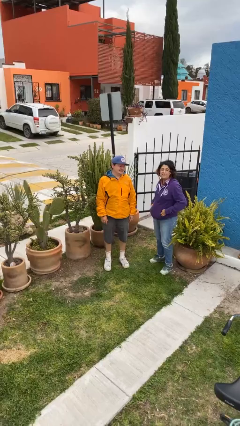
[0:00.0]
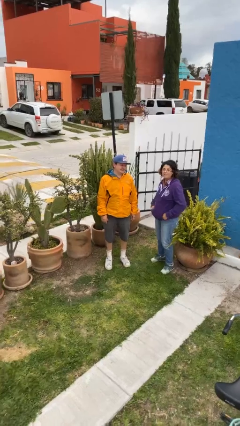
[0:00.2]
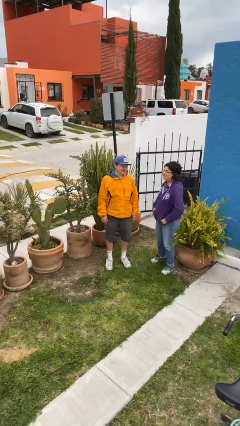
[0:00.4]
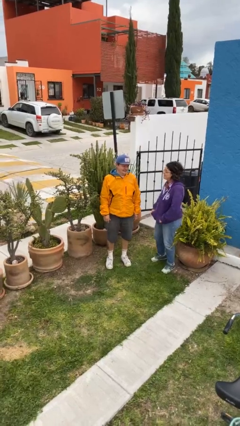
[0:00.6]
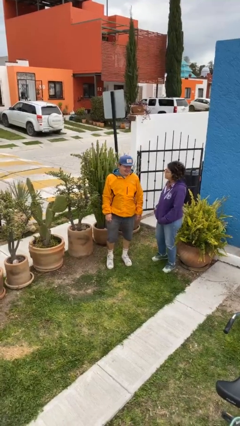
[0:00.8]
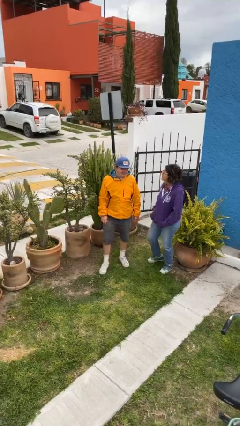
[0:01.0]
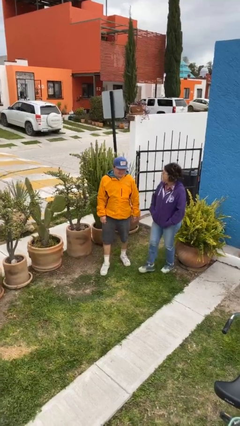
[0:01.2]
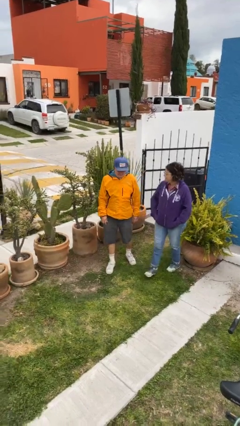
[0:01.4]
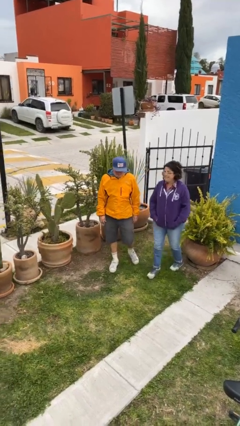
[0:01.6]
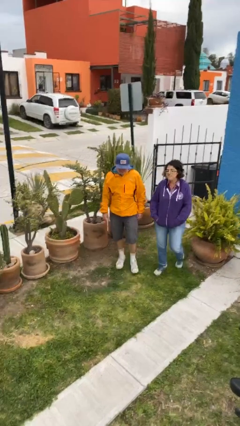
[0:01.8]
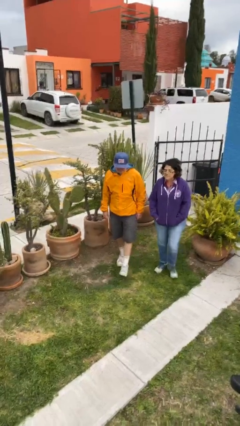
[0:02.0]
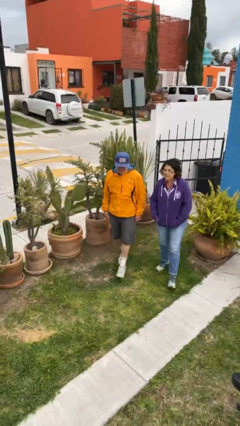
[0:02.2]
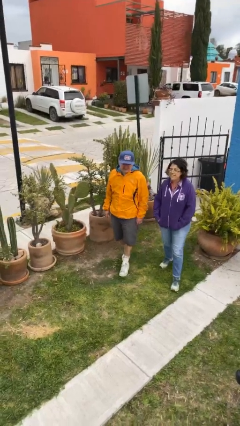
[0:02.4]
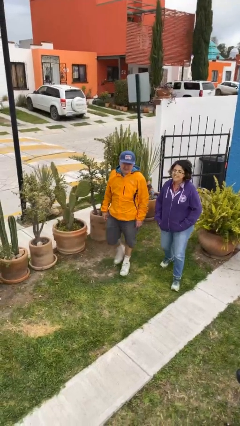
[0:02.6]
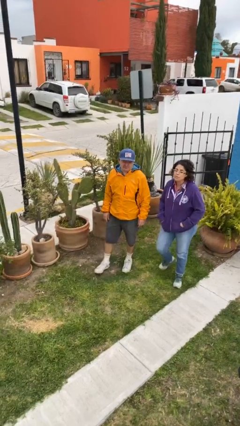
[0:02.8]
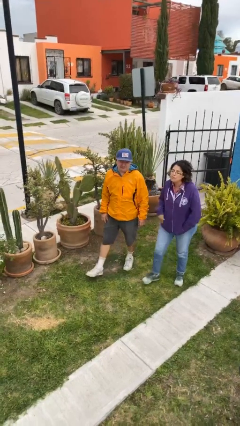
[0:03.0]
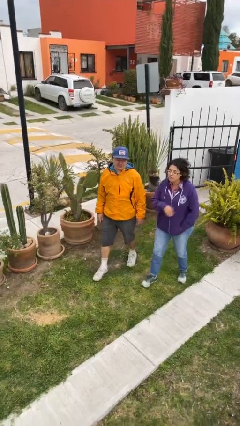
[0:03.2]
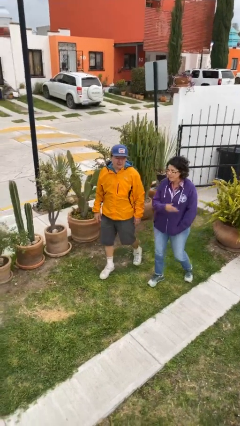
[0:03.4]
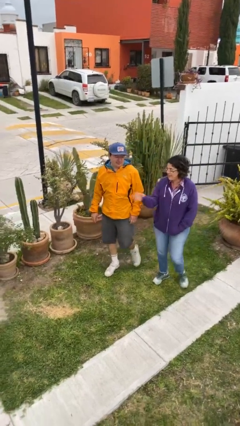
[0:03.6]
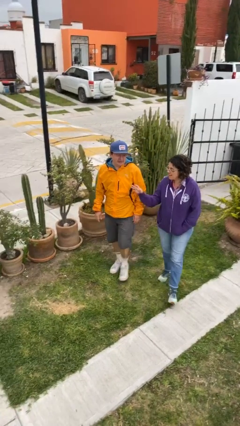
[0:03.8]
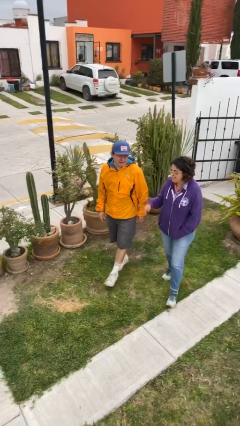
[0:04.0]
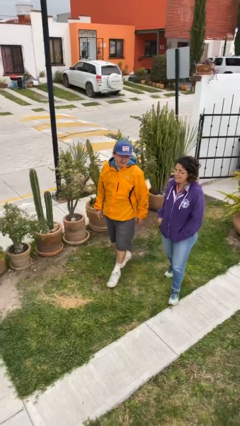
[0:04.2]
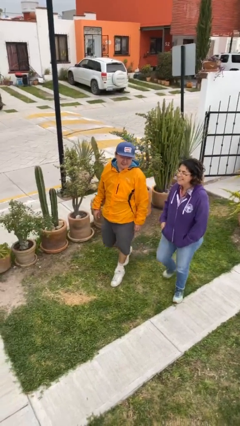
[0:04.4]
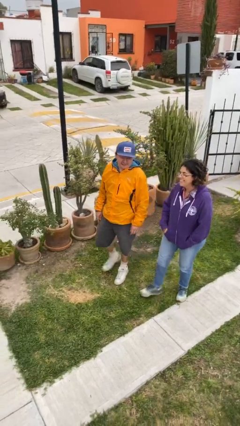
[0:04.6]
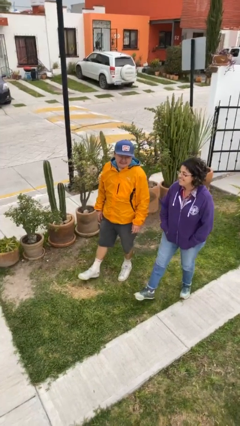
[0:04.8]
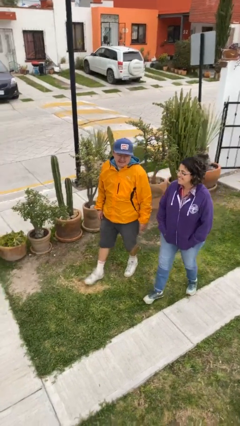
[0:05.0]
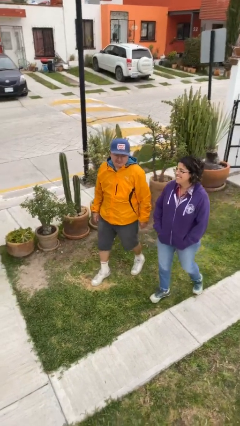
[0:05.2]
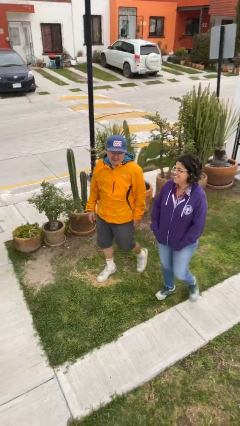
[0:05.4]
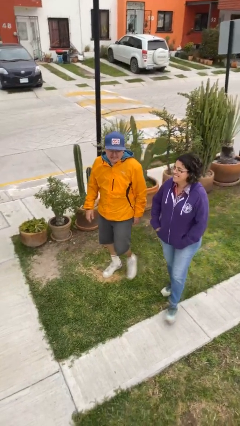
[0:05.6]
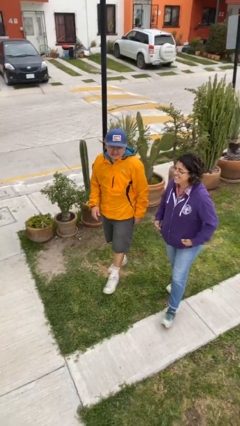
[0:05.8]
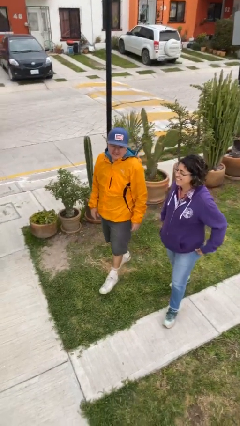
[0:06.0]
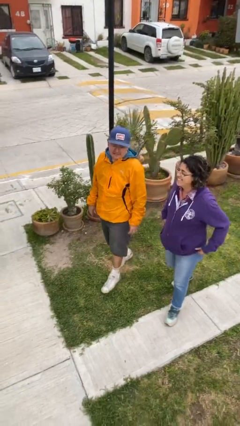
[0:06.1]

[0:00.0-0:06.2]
person talks to person

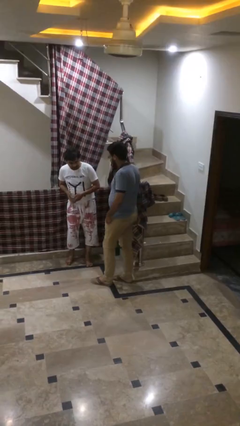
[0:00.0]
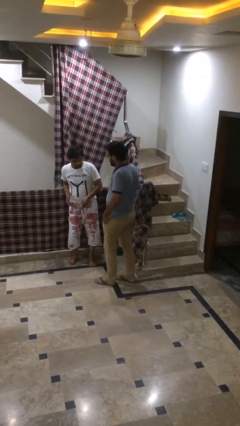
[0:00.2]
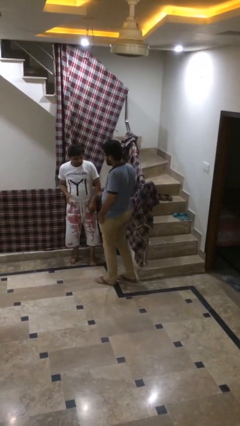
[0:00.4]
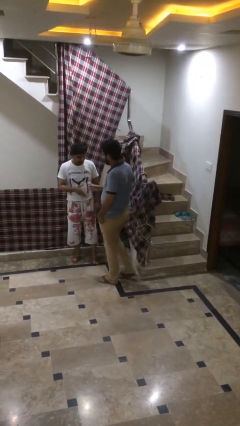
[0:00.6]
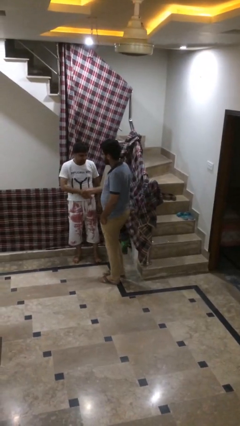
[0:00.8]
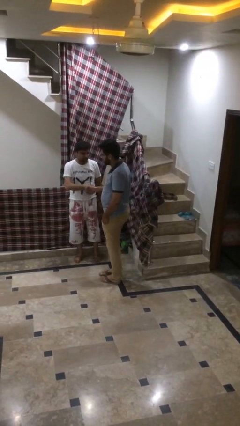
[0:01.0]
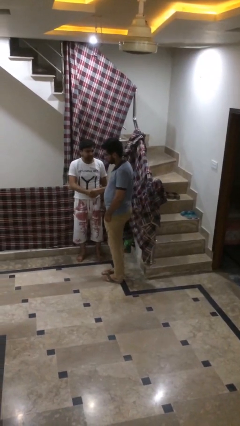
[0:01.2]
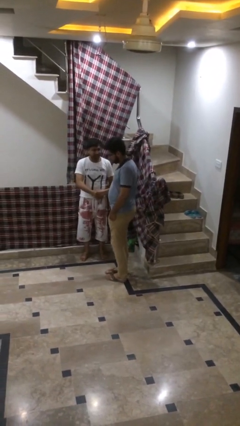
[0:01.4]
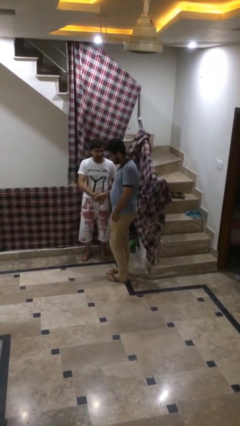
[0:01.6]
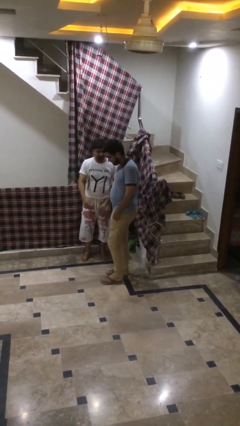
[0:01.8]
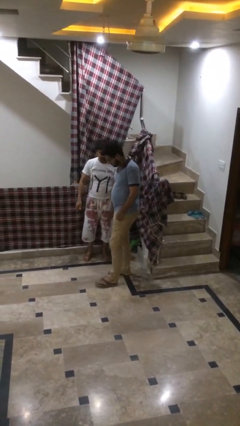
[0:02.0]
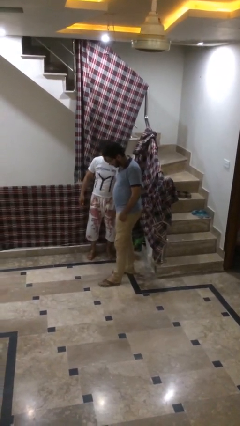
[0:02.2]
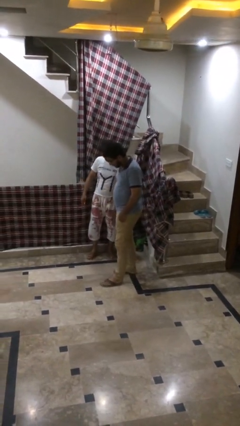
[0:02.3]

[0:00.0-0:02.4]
person shakes hand

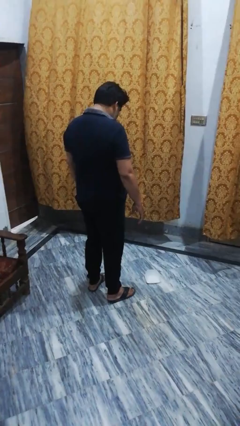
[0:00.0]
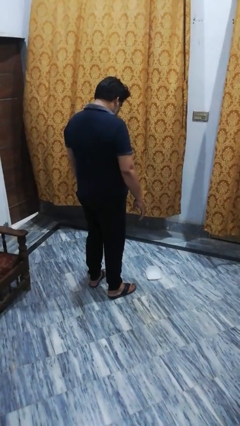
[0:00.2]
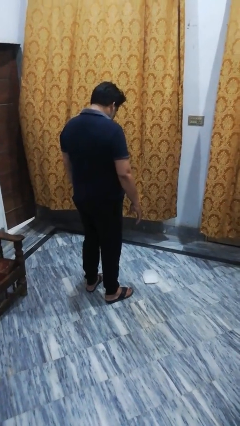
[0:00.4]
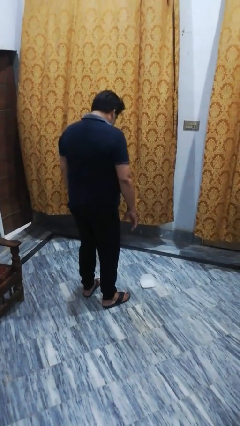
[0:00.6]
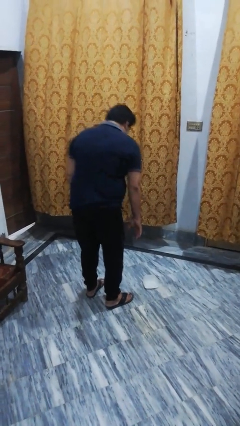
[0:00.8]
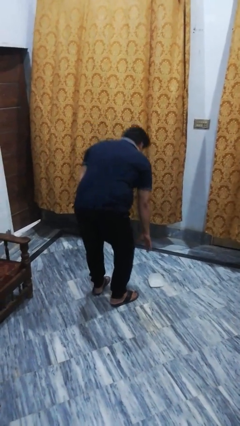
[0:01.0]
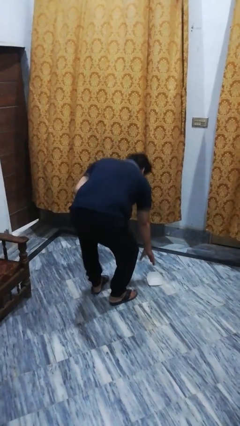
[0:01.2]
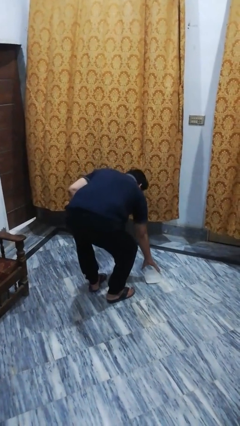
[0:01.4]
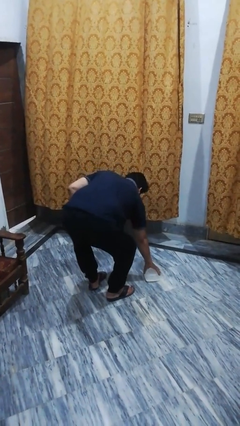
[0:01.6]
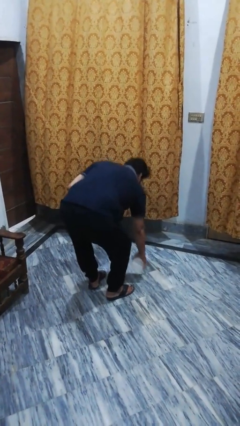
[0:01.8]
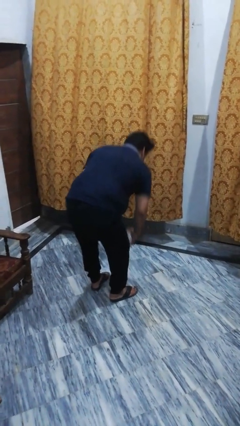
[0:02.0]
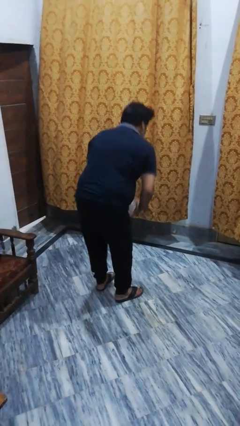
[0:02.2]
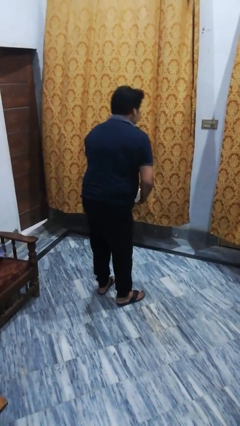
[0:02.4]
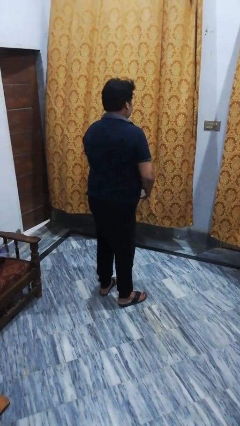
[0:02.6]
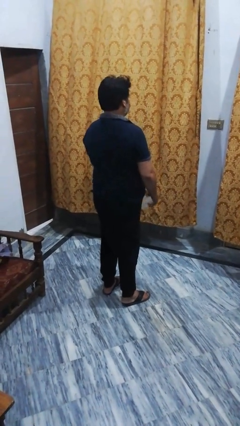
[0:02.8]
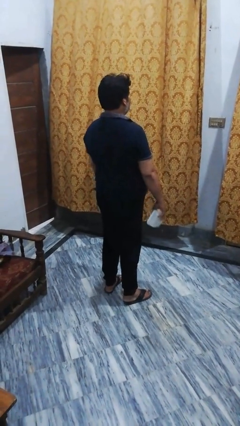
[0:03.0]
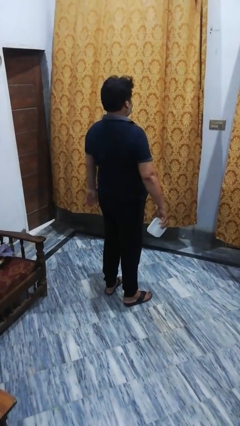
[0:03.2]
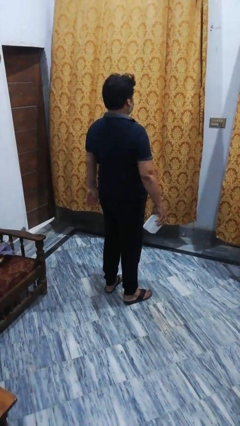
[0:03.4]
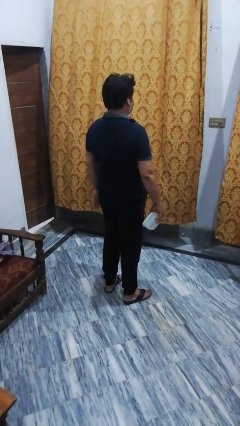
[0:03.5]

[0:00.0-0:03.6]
person picks up object from floor

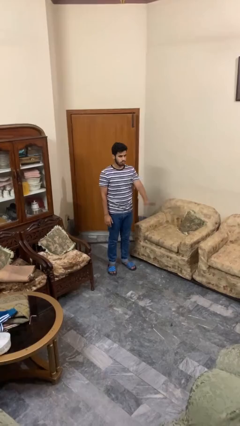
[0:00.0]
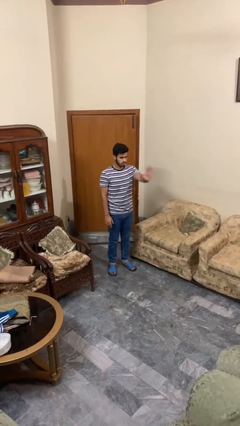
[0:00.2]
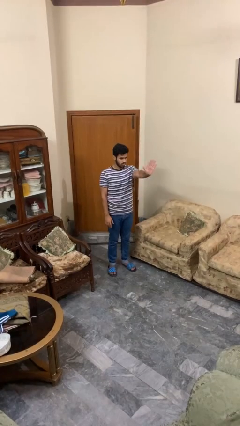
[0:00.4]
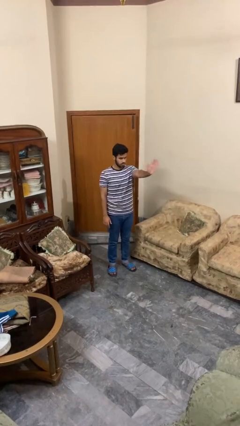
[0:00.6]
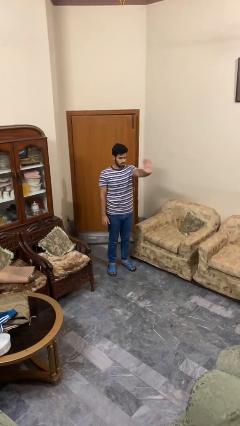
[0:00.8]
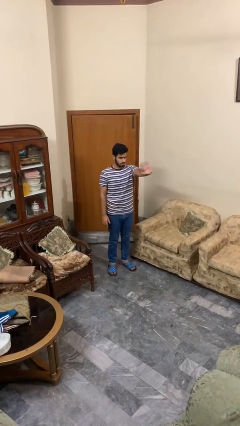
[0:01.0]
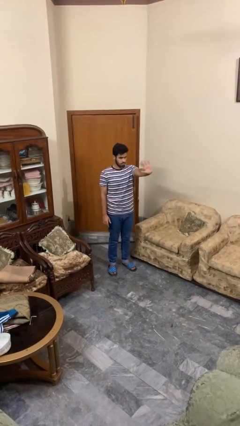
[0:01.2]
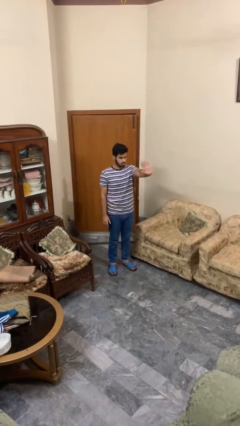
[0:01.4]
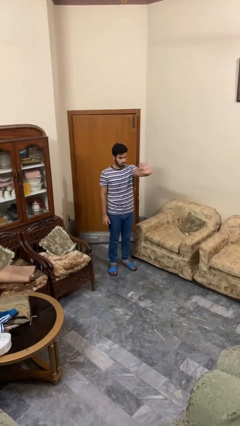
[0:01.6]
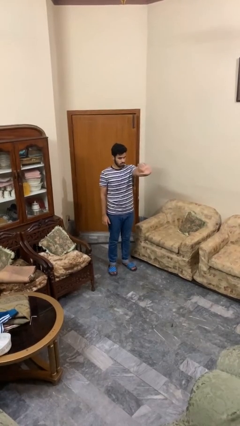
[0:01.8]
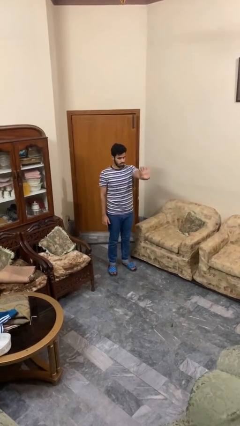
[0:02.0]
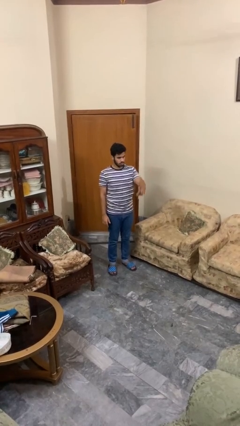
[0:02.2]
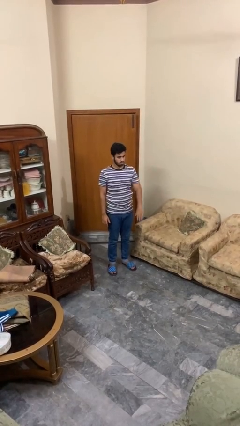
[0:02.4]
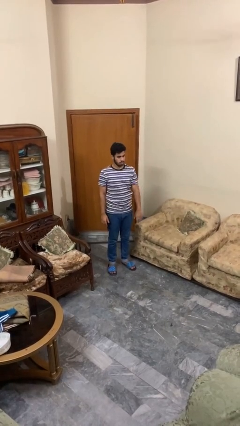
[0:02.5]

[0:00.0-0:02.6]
person waves at person

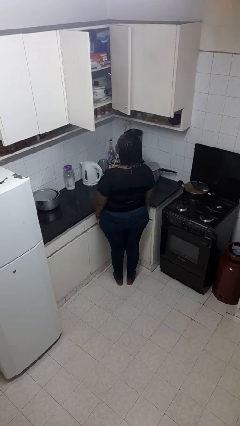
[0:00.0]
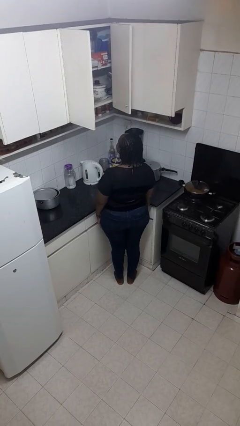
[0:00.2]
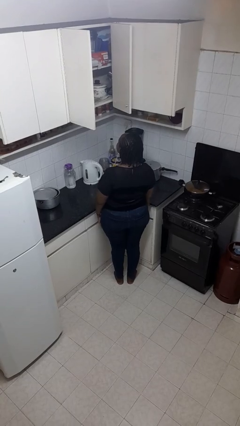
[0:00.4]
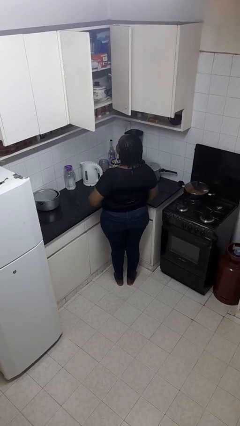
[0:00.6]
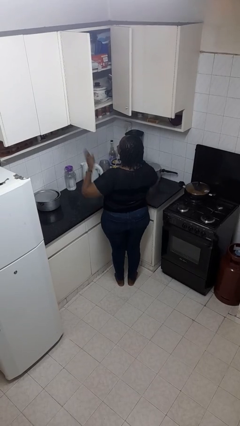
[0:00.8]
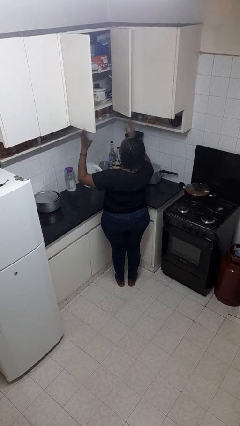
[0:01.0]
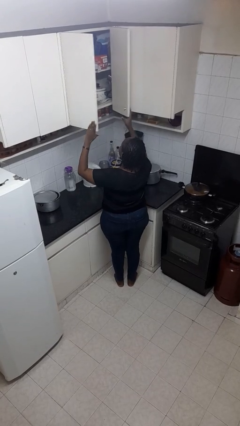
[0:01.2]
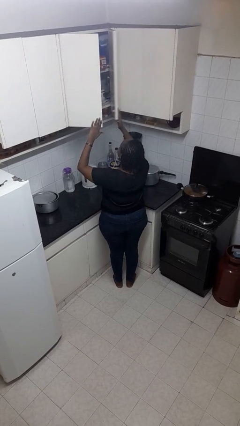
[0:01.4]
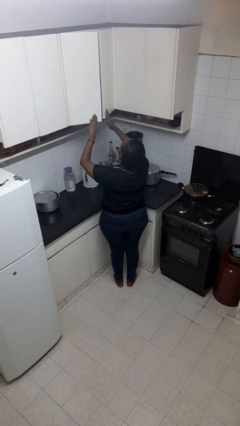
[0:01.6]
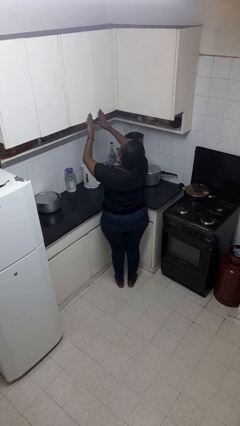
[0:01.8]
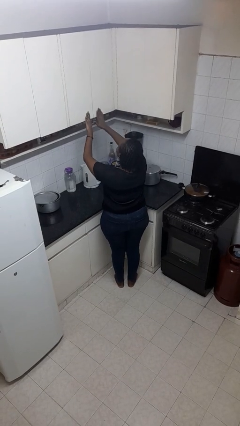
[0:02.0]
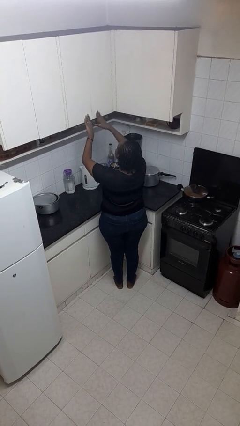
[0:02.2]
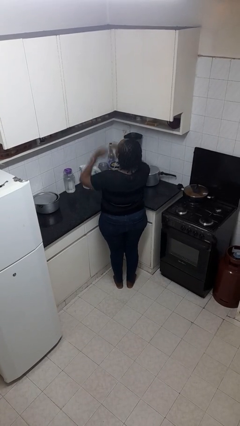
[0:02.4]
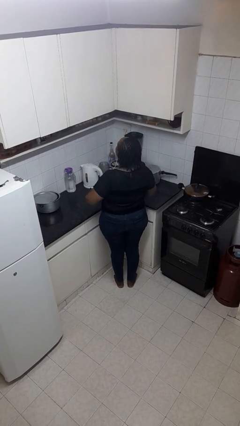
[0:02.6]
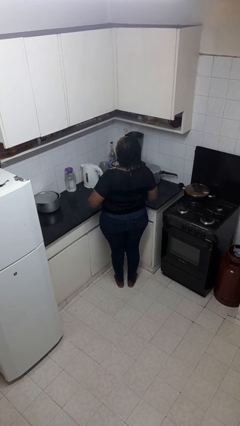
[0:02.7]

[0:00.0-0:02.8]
person closes cabinet
